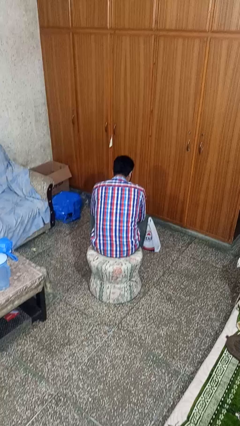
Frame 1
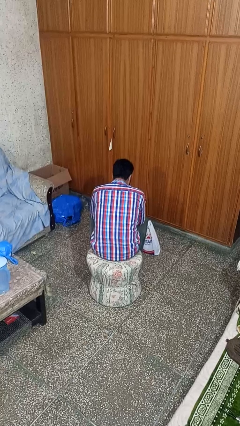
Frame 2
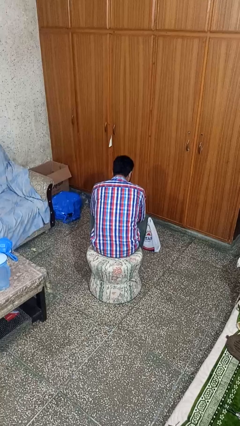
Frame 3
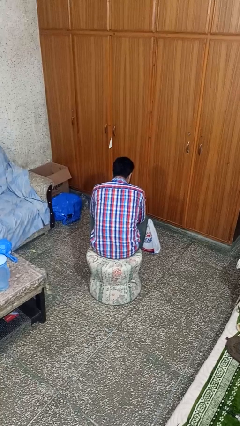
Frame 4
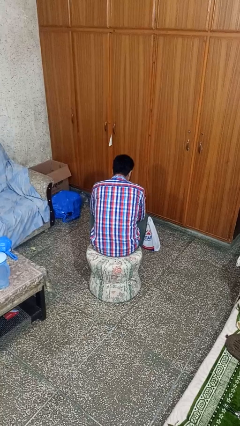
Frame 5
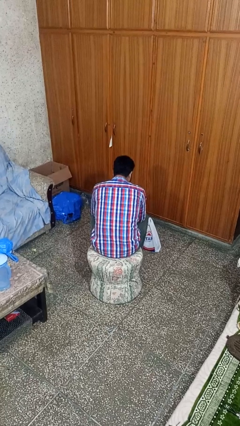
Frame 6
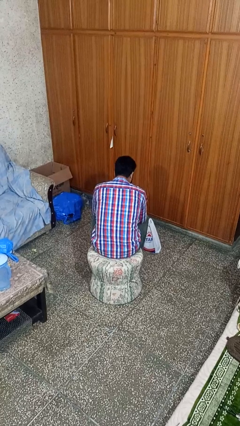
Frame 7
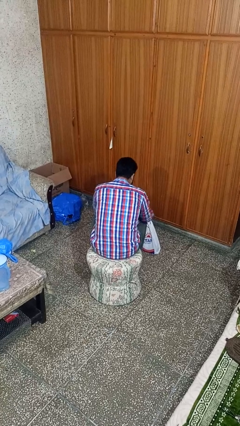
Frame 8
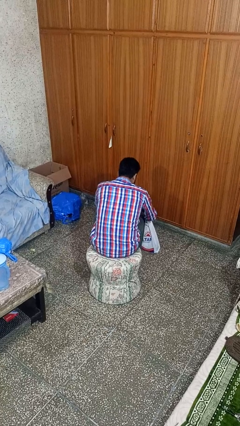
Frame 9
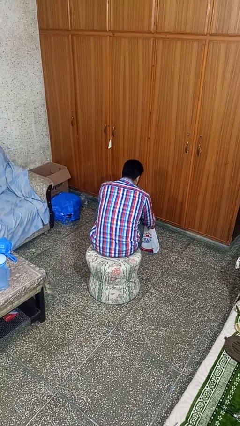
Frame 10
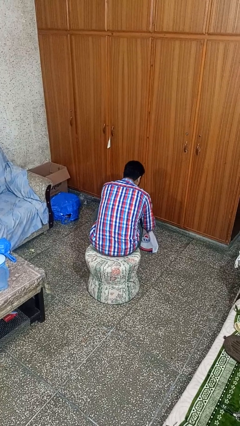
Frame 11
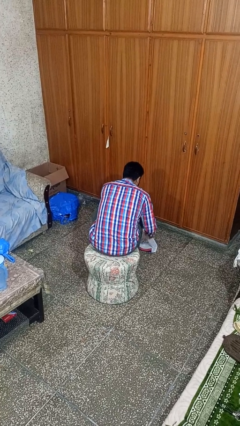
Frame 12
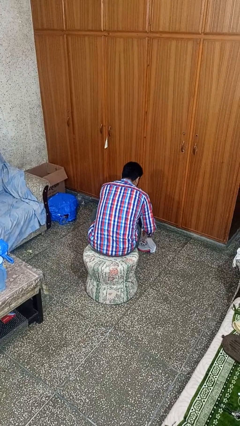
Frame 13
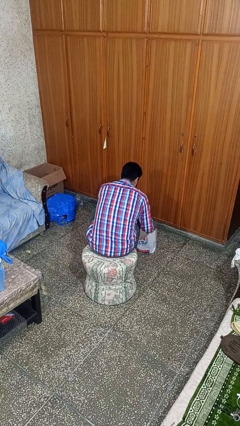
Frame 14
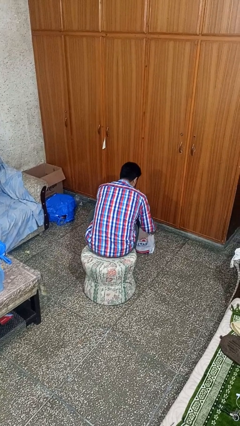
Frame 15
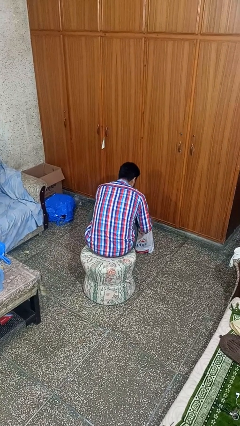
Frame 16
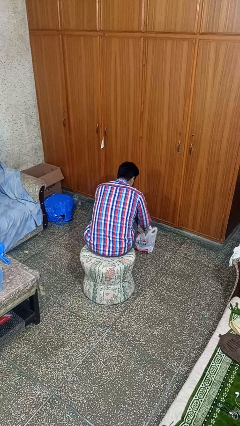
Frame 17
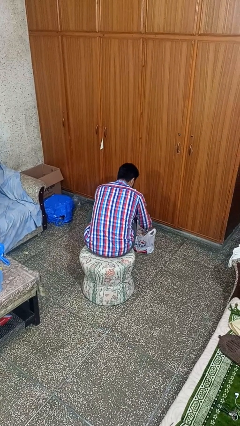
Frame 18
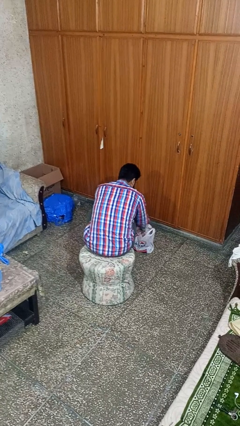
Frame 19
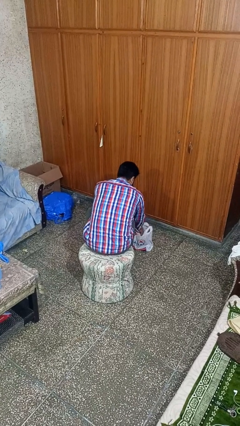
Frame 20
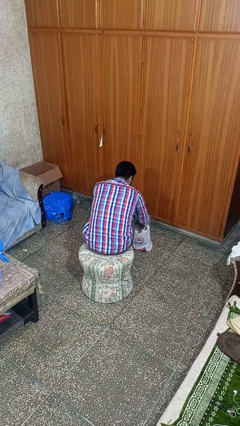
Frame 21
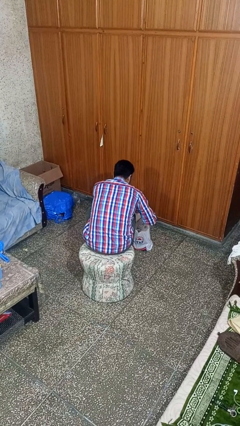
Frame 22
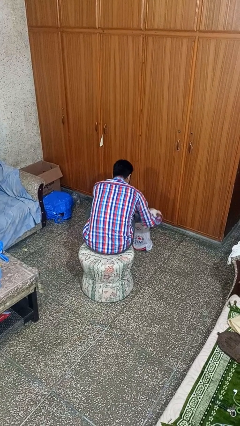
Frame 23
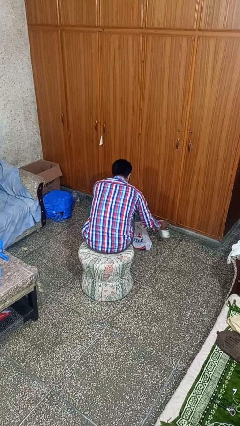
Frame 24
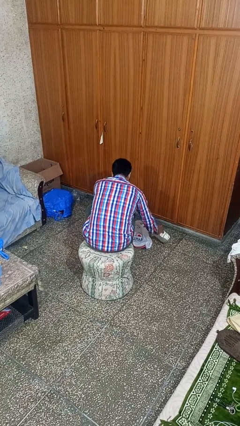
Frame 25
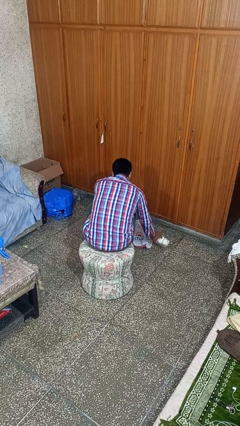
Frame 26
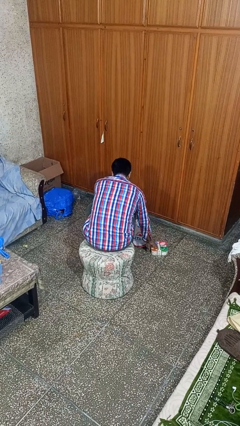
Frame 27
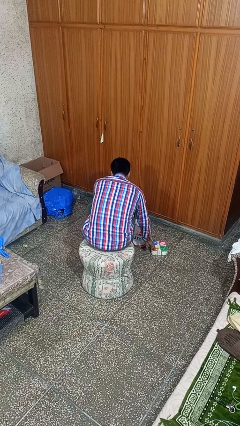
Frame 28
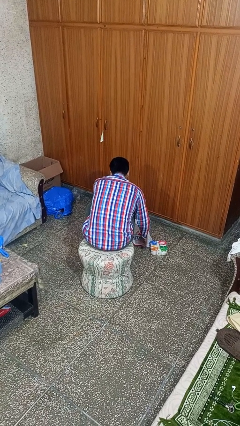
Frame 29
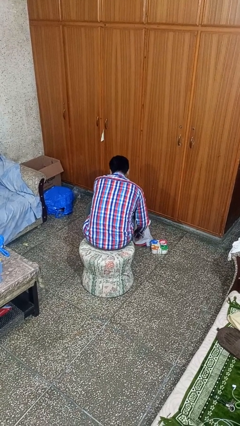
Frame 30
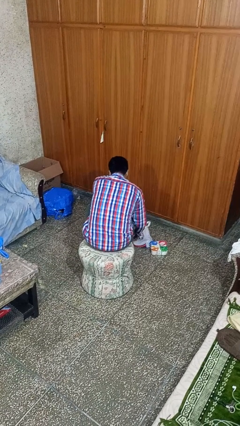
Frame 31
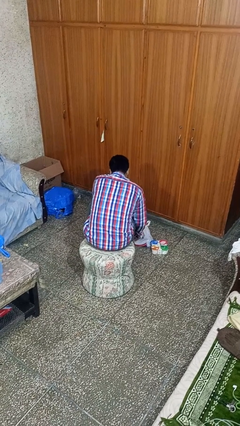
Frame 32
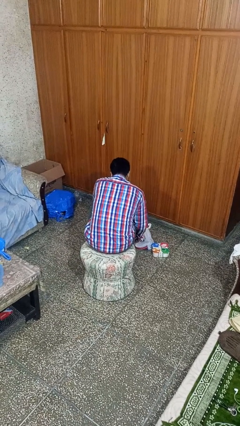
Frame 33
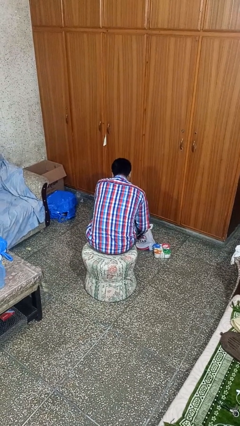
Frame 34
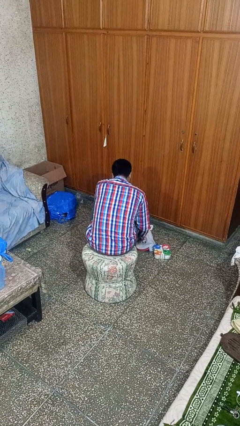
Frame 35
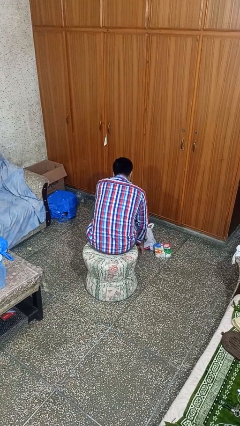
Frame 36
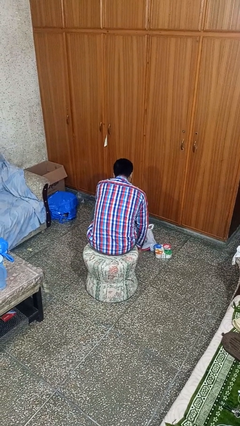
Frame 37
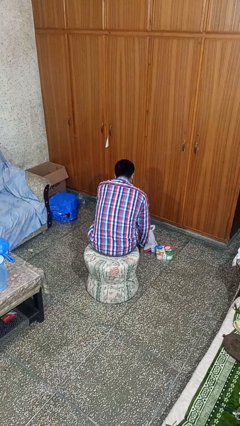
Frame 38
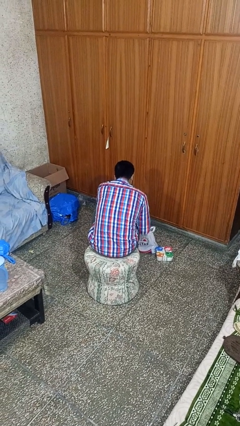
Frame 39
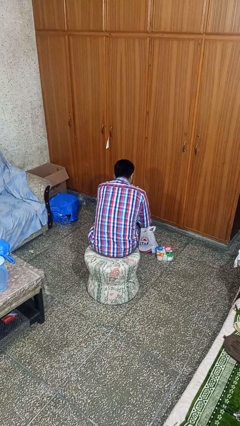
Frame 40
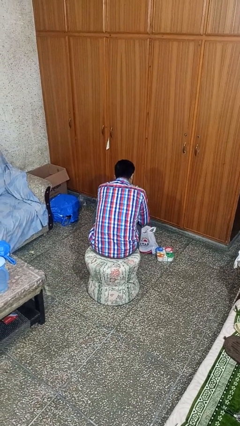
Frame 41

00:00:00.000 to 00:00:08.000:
person takes object from bag

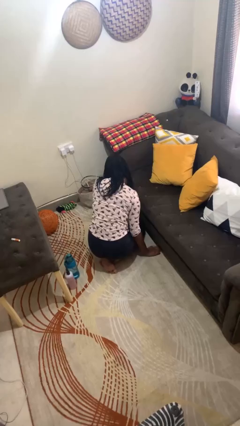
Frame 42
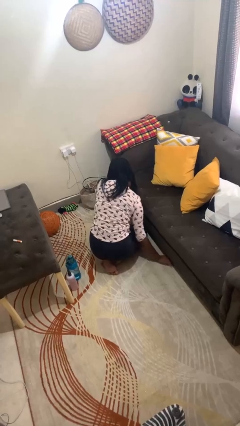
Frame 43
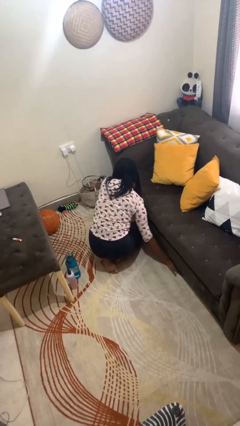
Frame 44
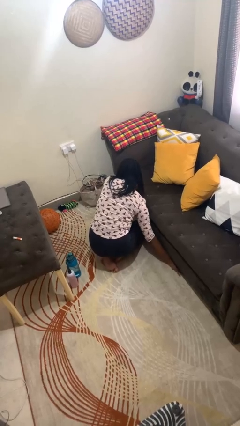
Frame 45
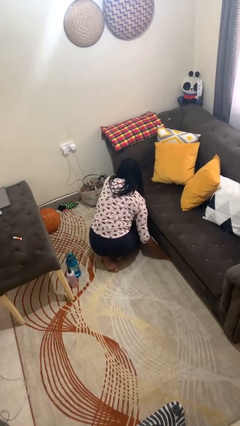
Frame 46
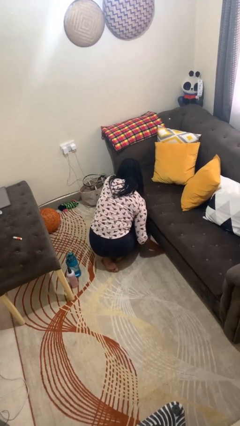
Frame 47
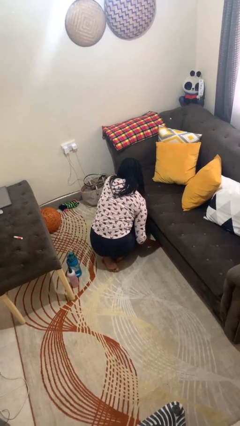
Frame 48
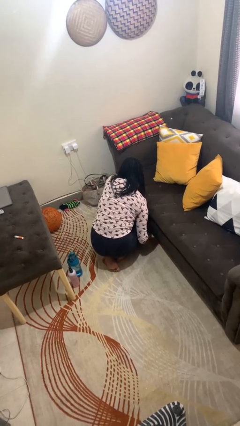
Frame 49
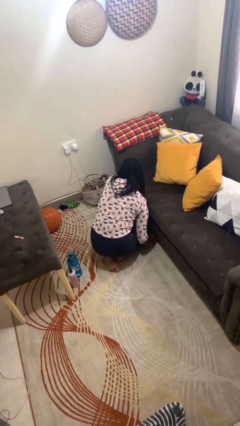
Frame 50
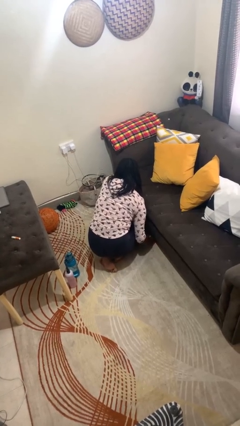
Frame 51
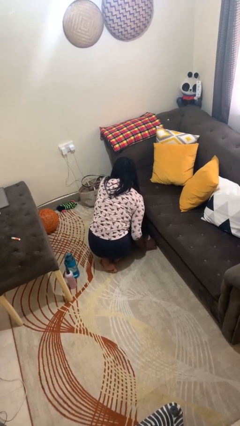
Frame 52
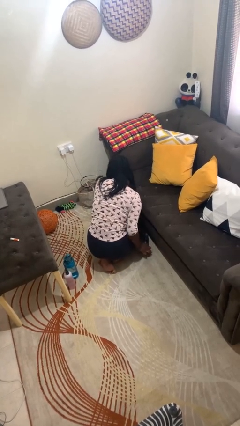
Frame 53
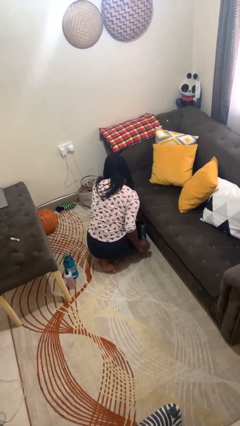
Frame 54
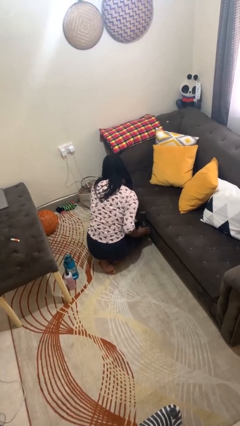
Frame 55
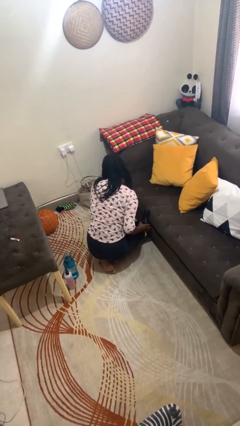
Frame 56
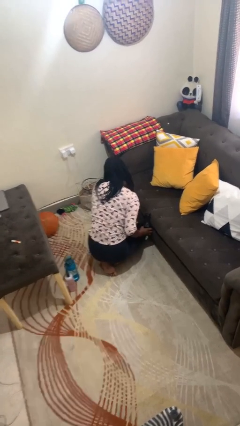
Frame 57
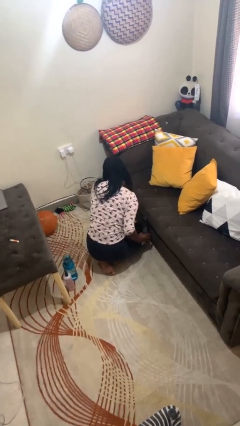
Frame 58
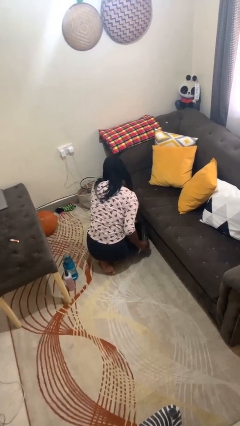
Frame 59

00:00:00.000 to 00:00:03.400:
person searches under couch

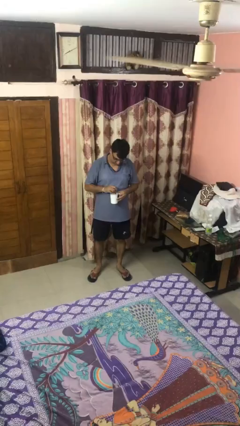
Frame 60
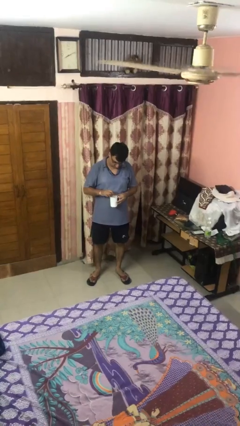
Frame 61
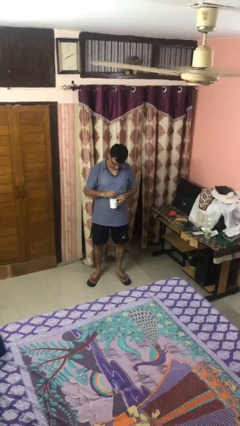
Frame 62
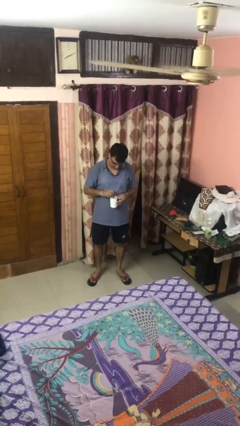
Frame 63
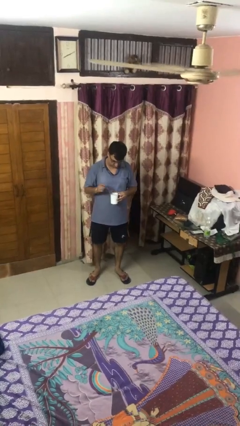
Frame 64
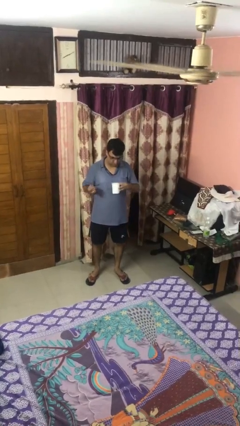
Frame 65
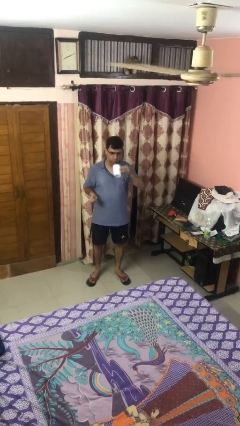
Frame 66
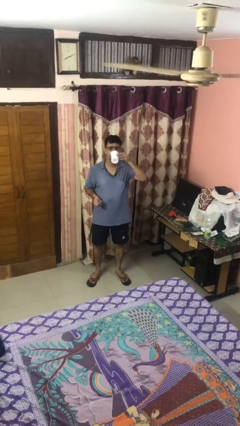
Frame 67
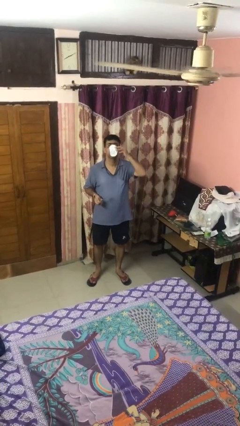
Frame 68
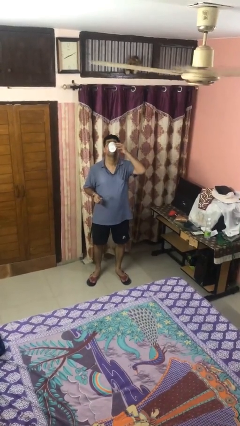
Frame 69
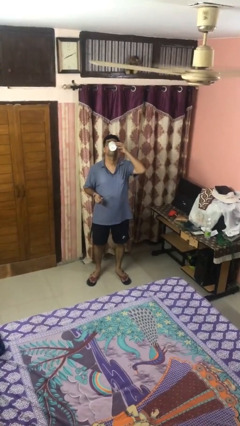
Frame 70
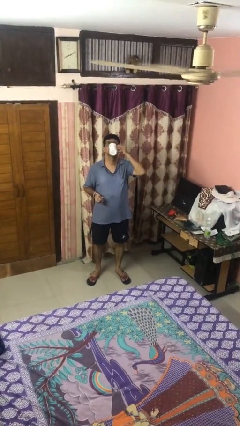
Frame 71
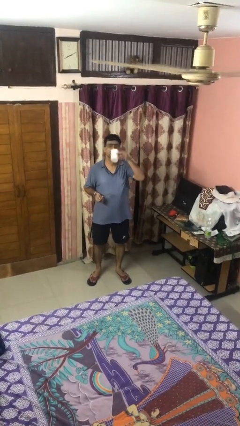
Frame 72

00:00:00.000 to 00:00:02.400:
person drinks from mug

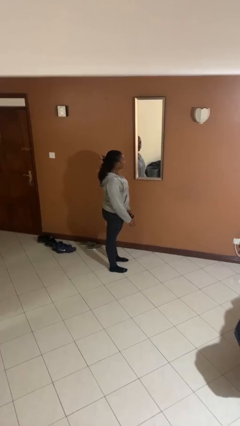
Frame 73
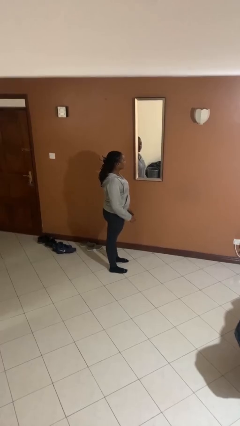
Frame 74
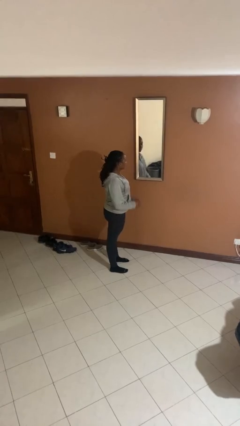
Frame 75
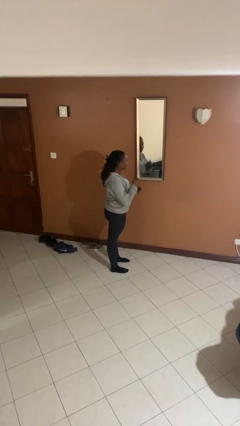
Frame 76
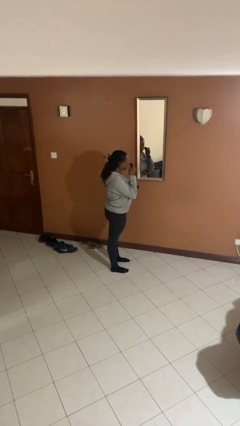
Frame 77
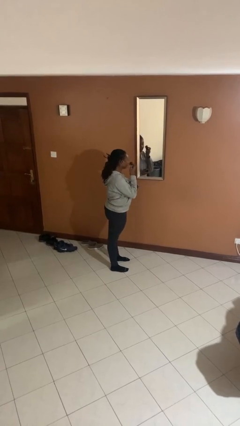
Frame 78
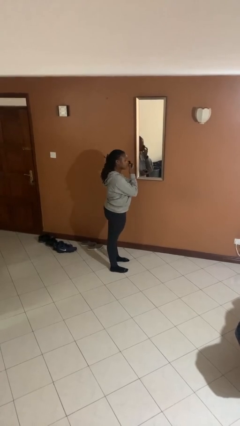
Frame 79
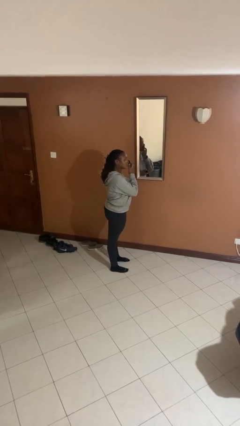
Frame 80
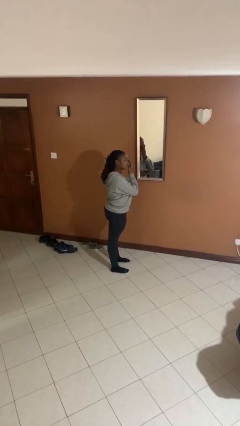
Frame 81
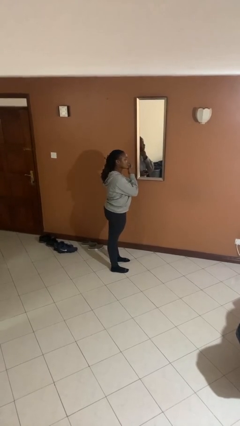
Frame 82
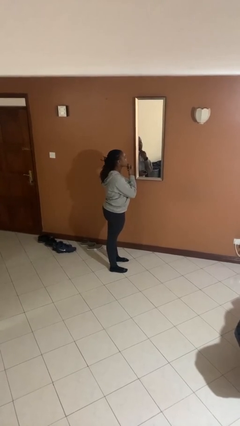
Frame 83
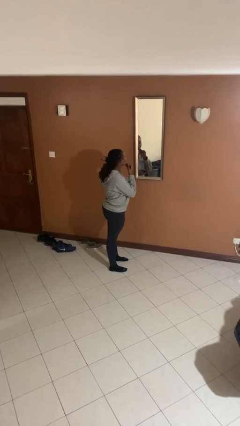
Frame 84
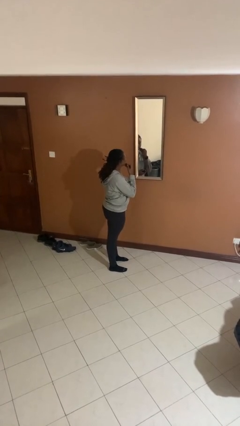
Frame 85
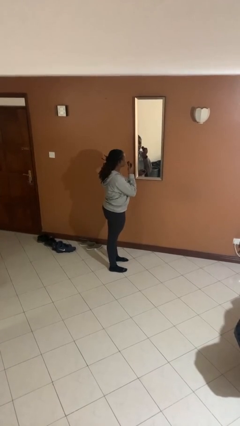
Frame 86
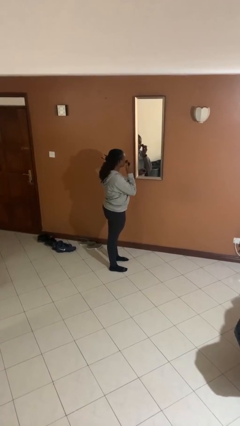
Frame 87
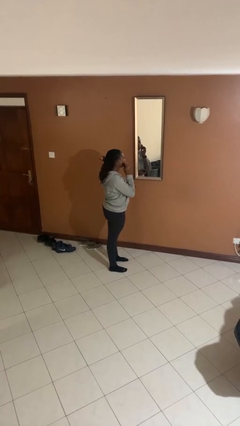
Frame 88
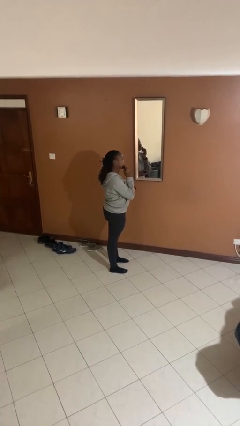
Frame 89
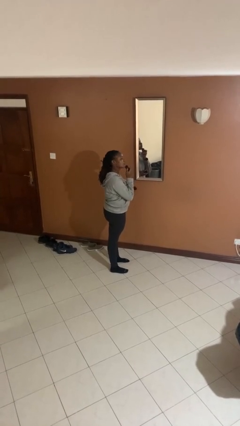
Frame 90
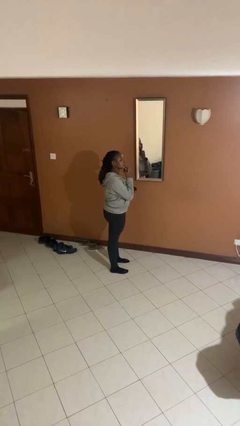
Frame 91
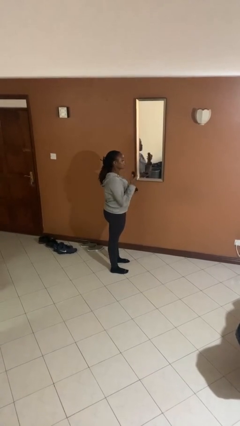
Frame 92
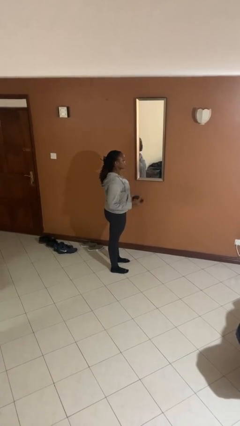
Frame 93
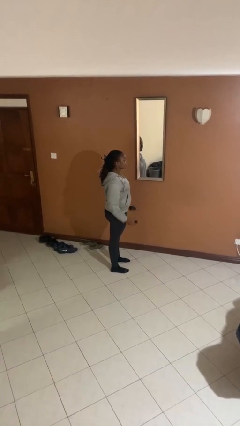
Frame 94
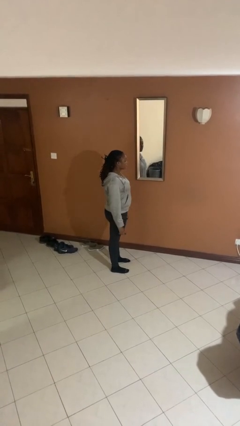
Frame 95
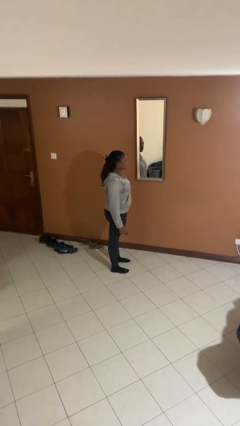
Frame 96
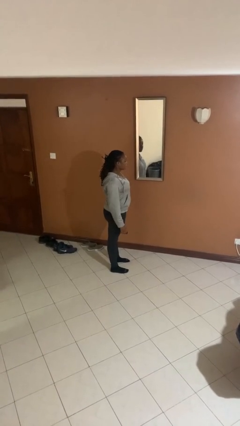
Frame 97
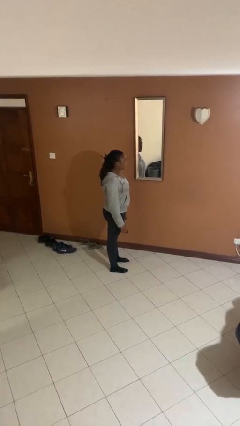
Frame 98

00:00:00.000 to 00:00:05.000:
person applies foundation makeup
